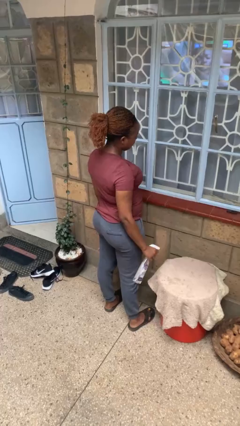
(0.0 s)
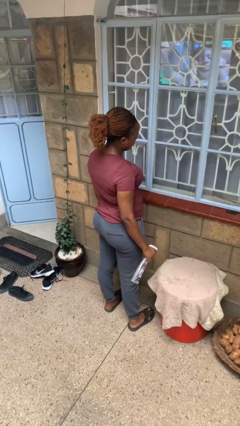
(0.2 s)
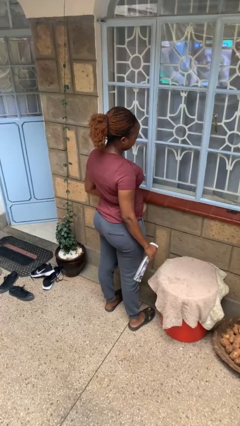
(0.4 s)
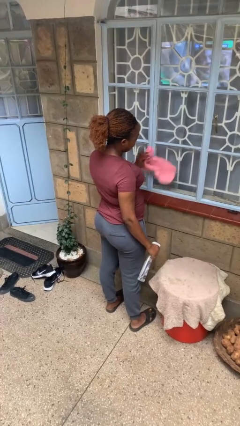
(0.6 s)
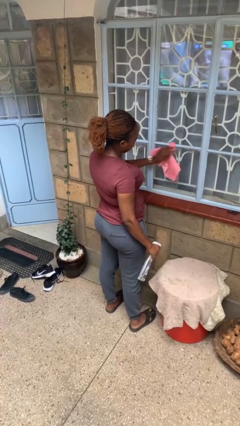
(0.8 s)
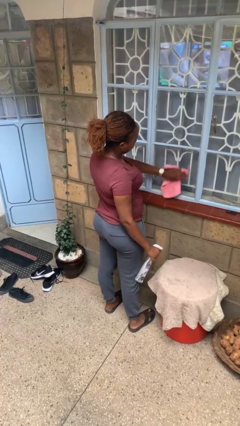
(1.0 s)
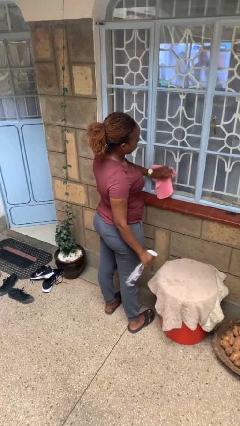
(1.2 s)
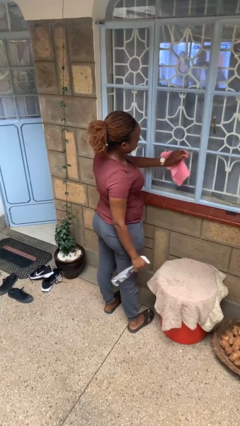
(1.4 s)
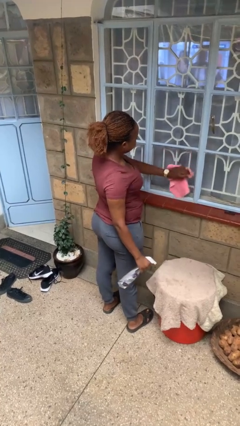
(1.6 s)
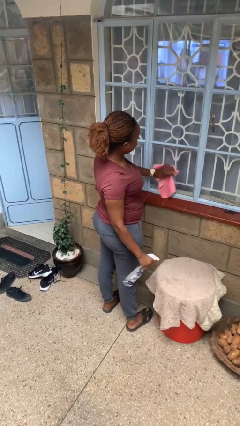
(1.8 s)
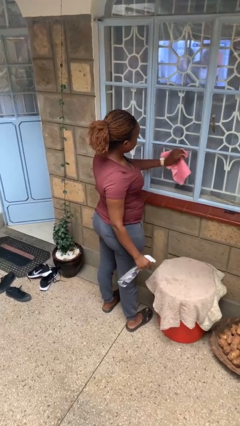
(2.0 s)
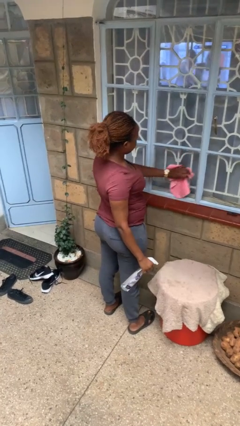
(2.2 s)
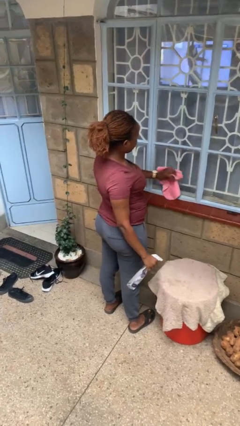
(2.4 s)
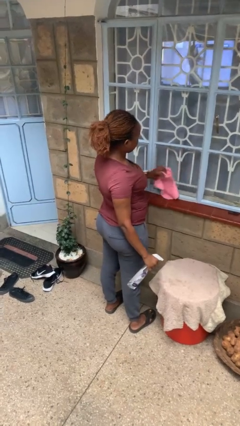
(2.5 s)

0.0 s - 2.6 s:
person washes window

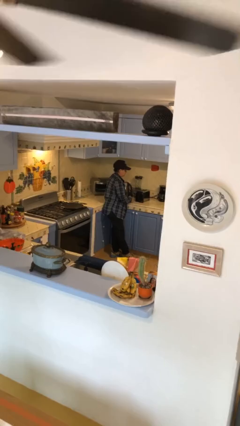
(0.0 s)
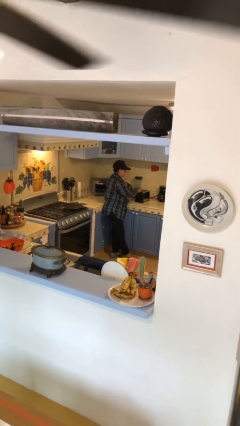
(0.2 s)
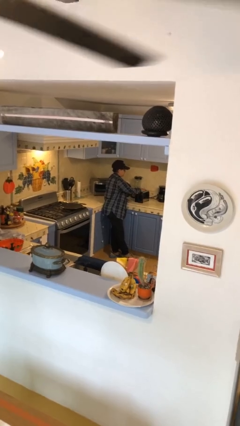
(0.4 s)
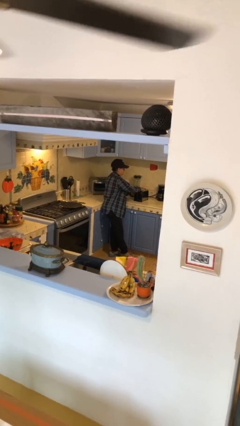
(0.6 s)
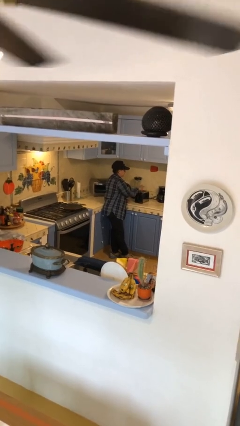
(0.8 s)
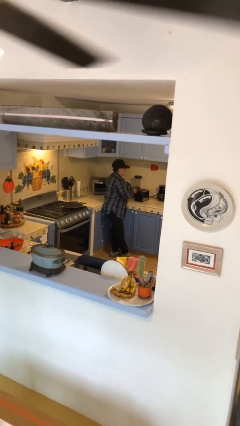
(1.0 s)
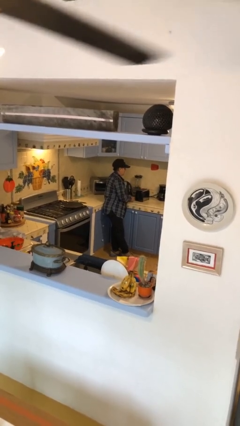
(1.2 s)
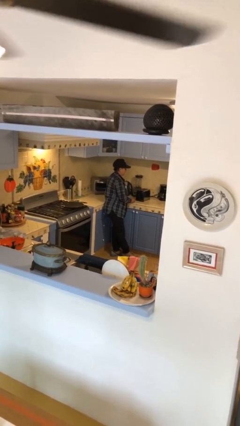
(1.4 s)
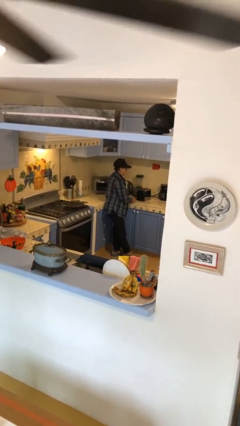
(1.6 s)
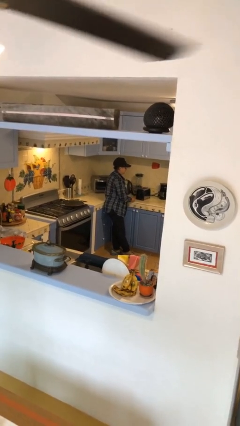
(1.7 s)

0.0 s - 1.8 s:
person takes object from toaster

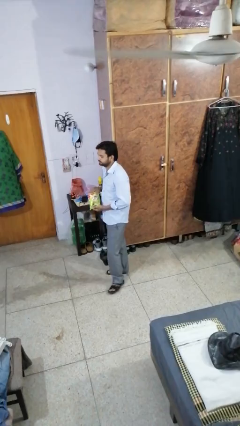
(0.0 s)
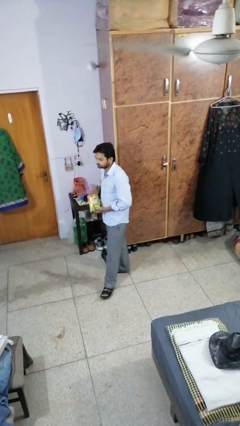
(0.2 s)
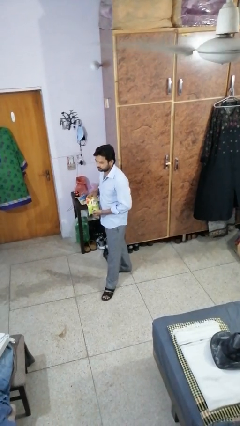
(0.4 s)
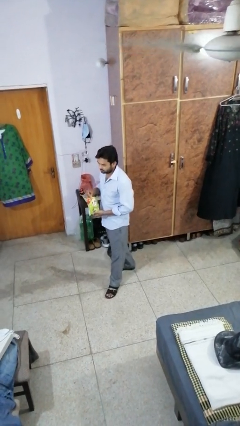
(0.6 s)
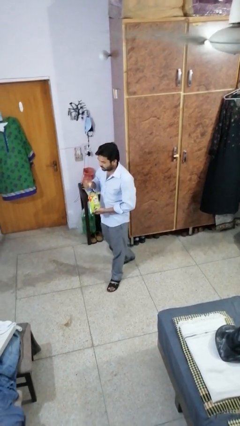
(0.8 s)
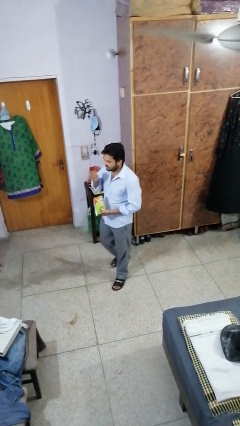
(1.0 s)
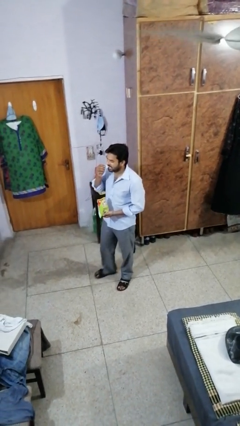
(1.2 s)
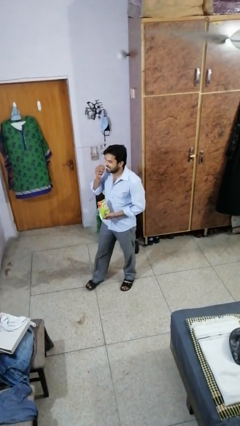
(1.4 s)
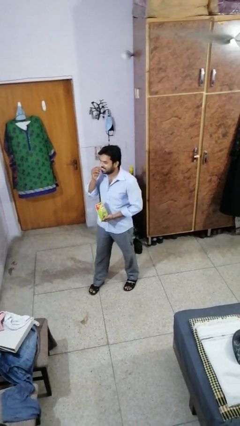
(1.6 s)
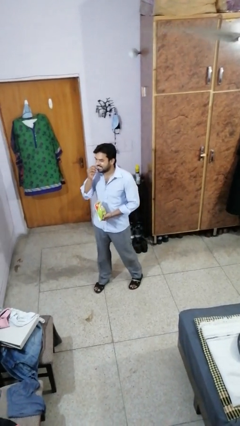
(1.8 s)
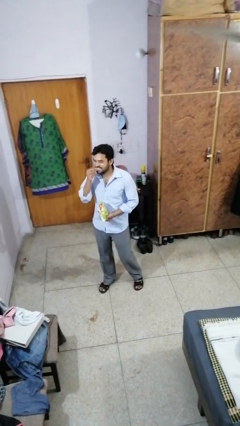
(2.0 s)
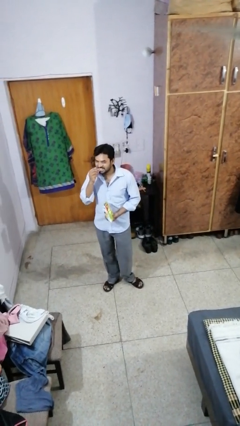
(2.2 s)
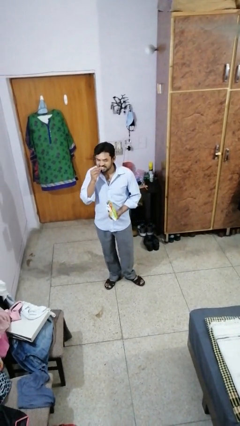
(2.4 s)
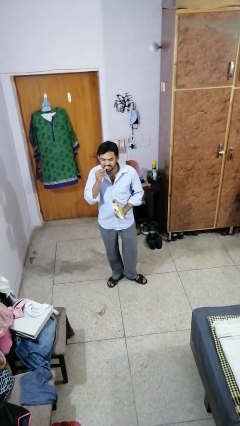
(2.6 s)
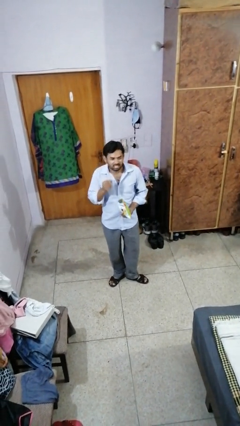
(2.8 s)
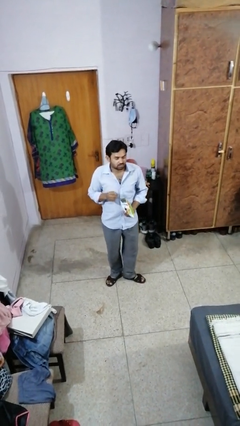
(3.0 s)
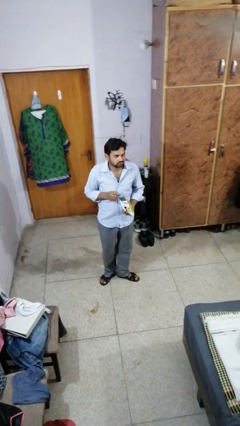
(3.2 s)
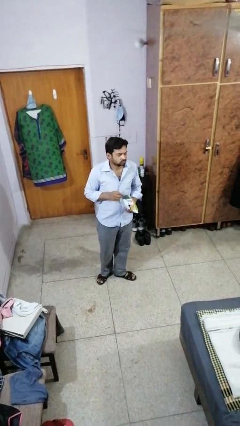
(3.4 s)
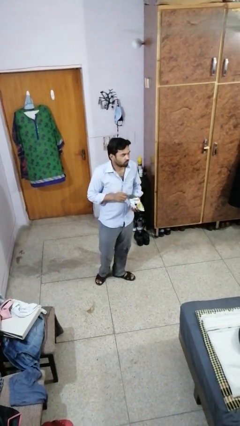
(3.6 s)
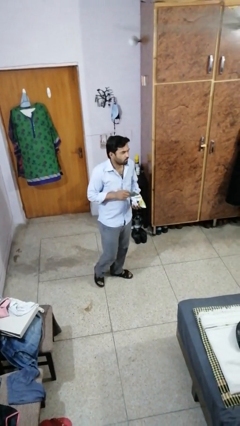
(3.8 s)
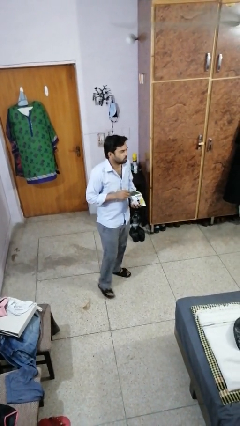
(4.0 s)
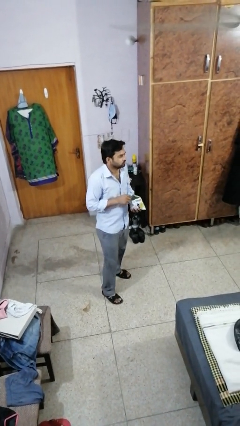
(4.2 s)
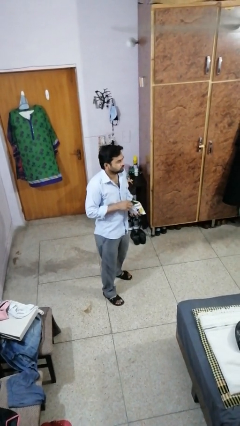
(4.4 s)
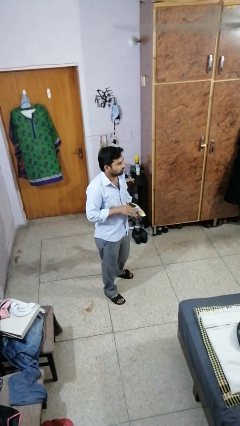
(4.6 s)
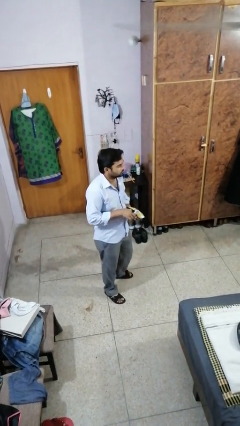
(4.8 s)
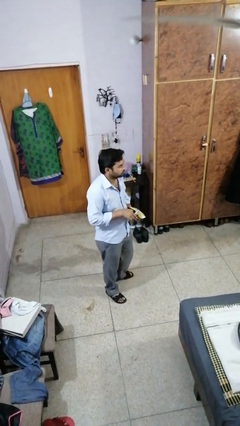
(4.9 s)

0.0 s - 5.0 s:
person eats snack from bag

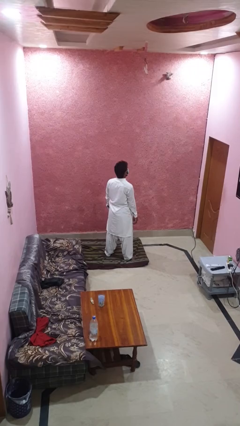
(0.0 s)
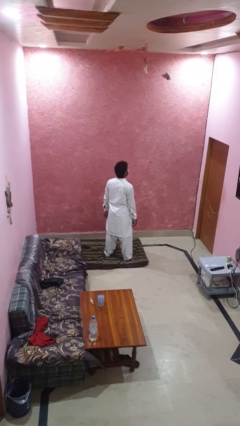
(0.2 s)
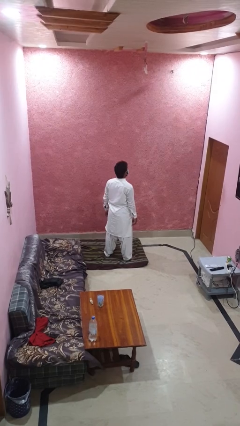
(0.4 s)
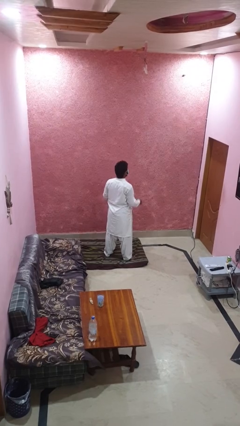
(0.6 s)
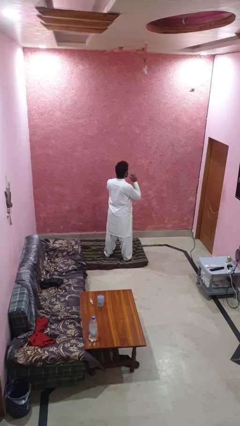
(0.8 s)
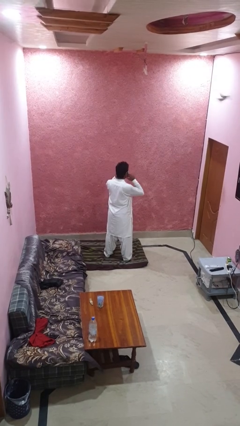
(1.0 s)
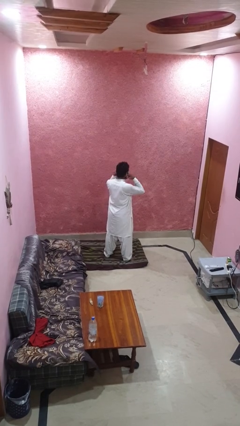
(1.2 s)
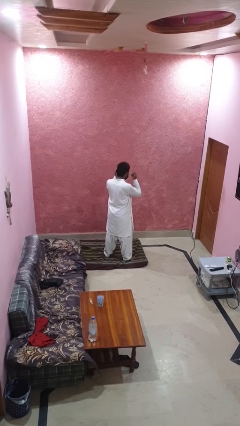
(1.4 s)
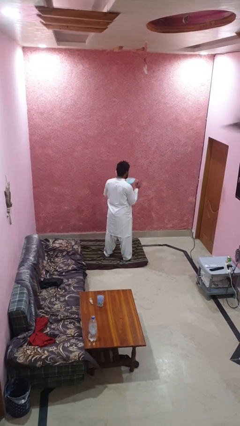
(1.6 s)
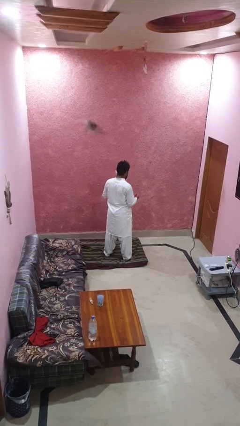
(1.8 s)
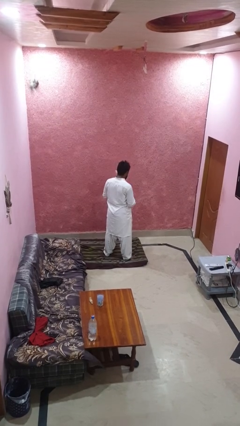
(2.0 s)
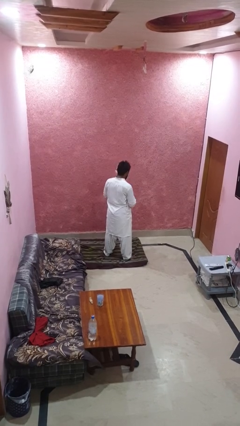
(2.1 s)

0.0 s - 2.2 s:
person takes off facemask

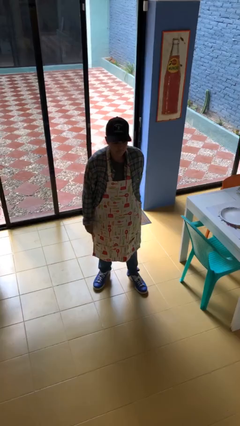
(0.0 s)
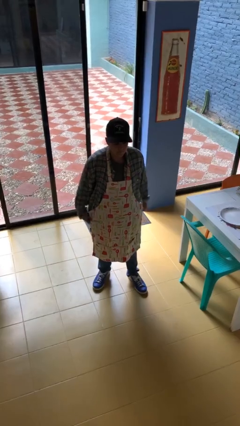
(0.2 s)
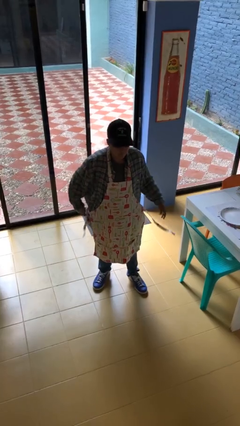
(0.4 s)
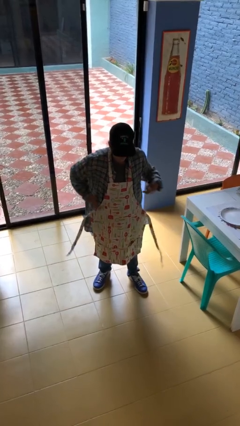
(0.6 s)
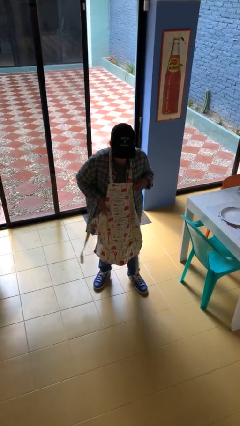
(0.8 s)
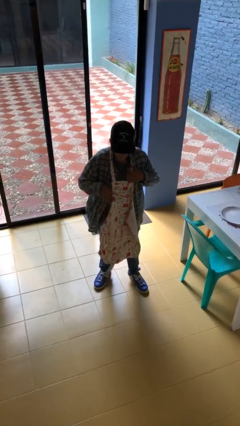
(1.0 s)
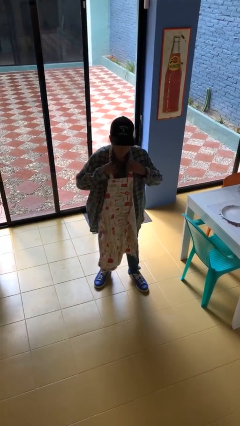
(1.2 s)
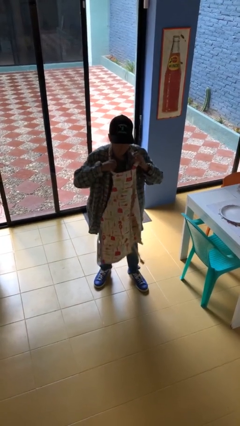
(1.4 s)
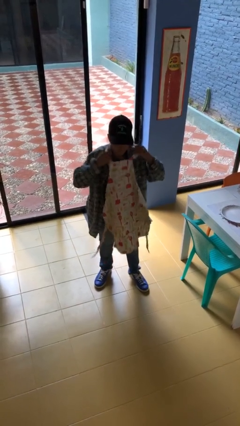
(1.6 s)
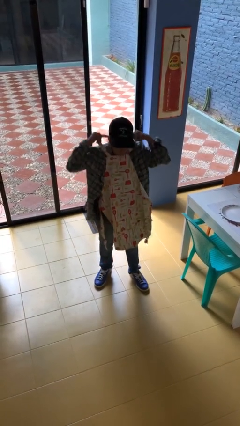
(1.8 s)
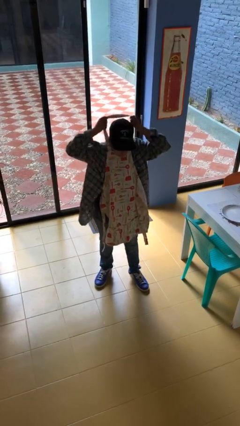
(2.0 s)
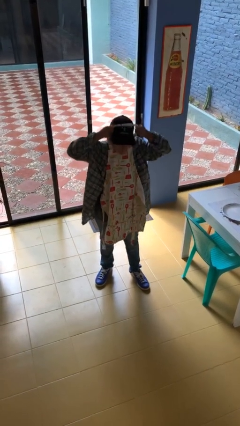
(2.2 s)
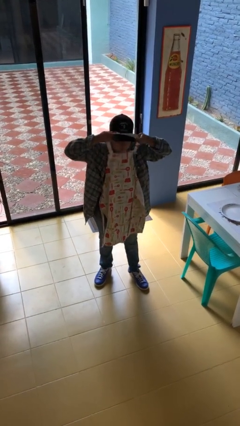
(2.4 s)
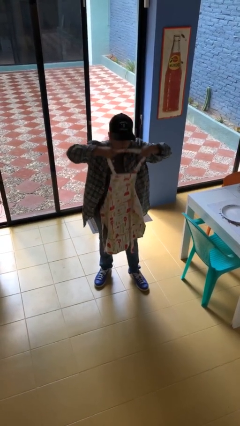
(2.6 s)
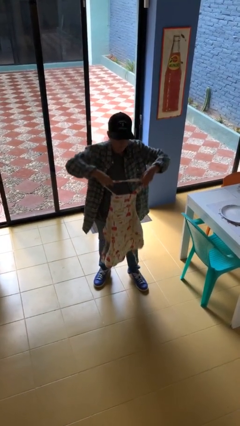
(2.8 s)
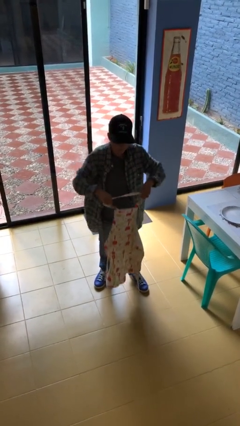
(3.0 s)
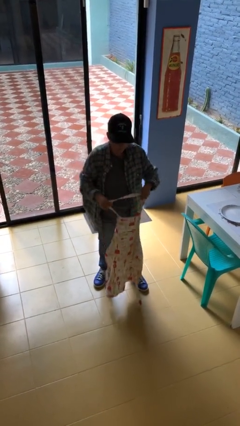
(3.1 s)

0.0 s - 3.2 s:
person takes off apron

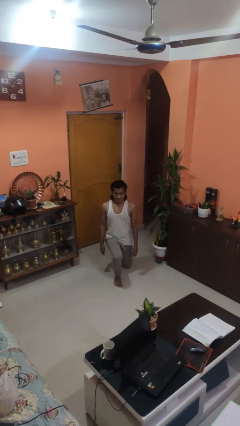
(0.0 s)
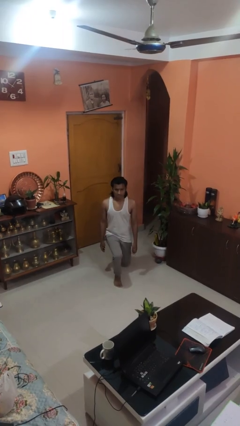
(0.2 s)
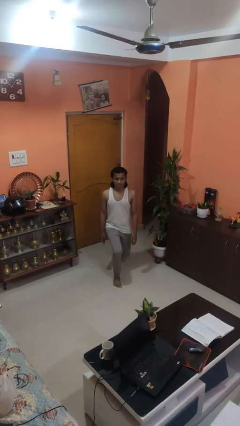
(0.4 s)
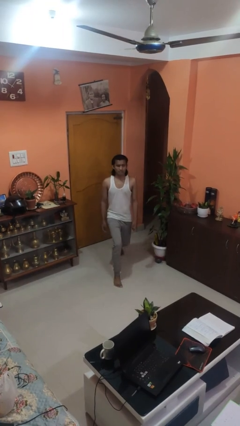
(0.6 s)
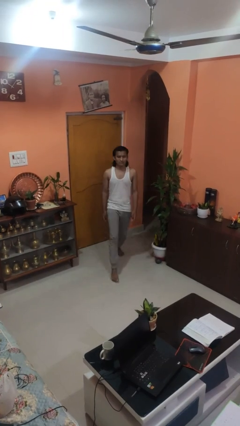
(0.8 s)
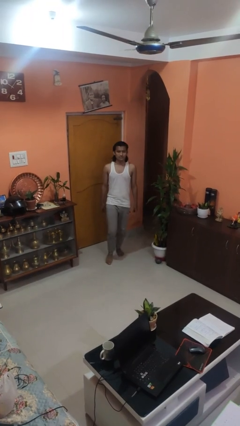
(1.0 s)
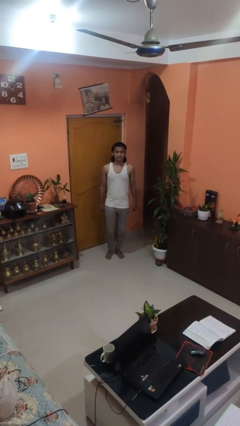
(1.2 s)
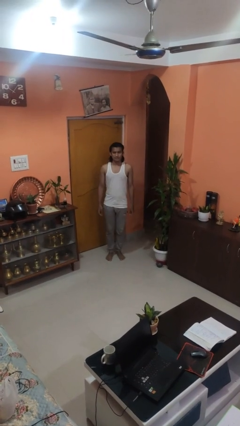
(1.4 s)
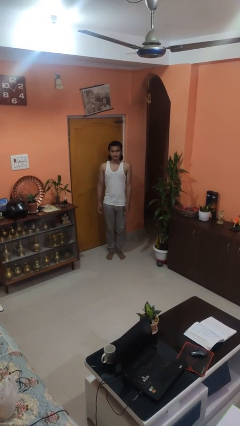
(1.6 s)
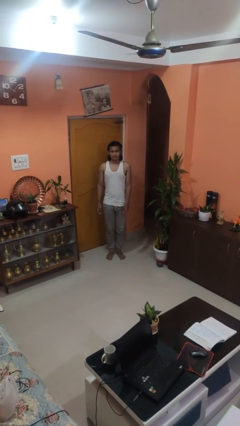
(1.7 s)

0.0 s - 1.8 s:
person stands up from floor

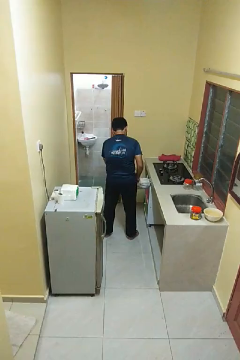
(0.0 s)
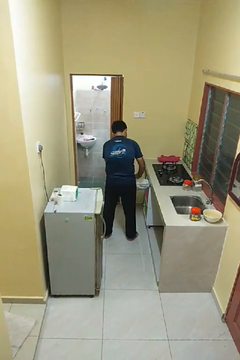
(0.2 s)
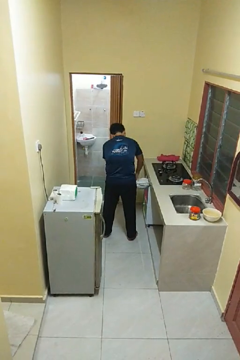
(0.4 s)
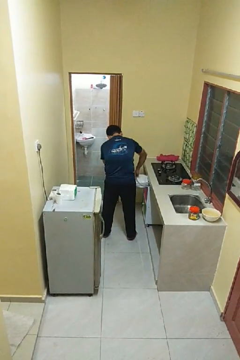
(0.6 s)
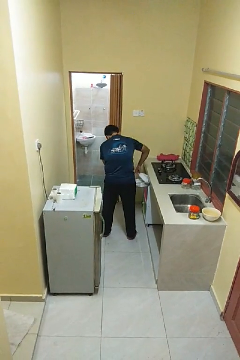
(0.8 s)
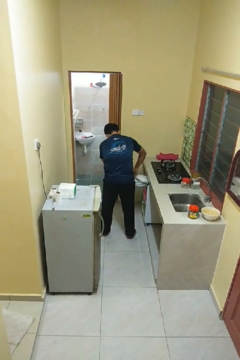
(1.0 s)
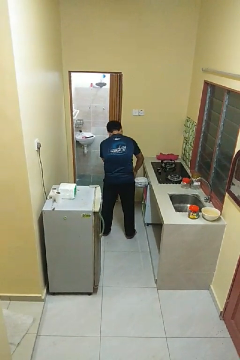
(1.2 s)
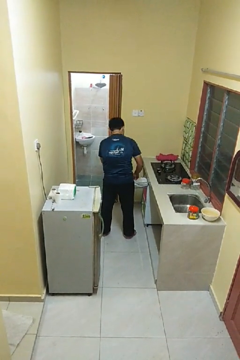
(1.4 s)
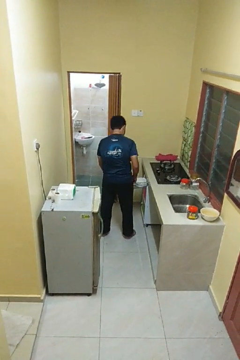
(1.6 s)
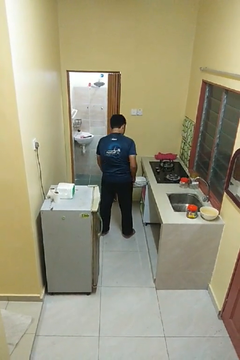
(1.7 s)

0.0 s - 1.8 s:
person searches in kitchen drawer
